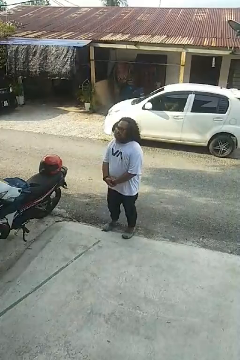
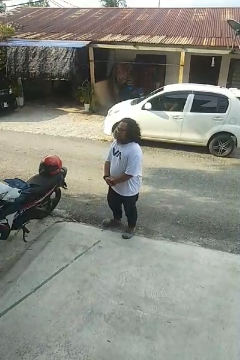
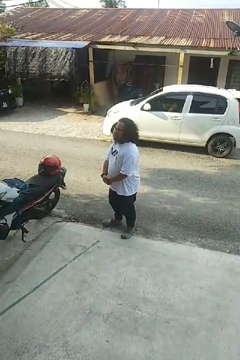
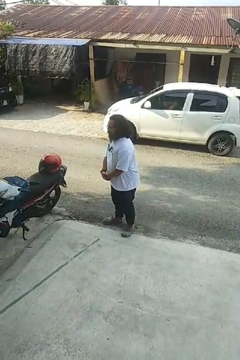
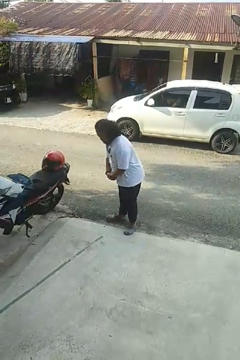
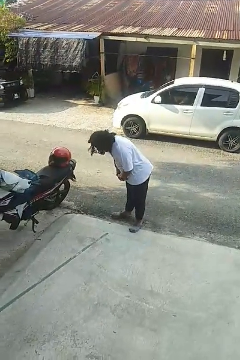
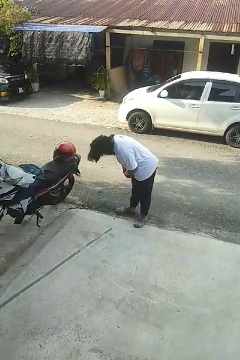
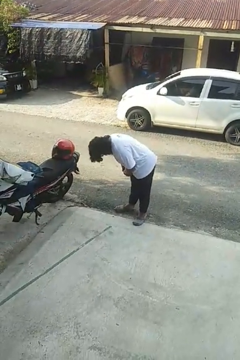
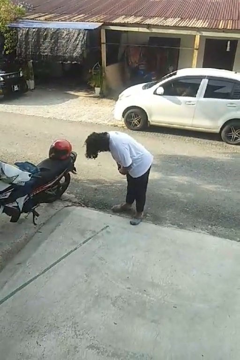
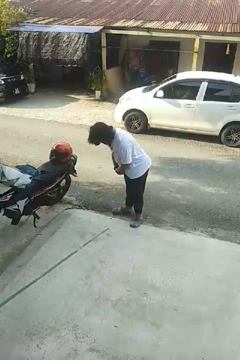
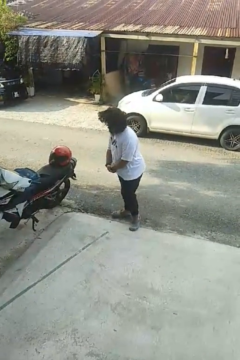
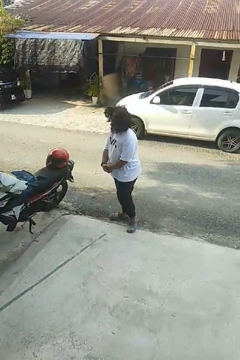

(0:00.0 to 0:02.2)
person bows

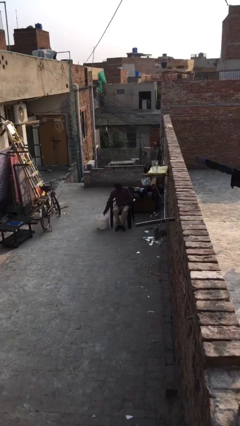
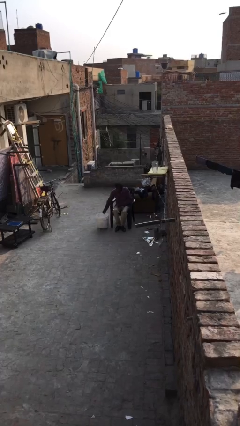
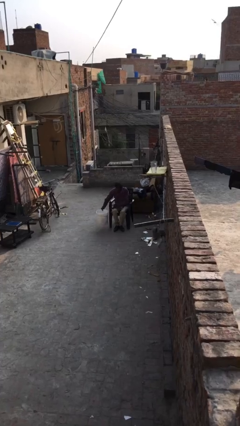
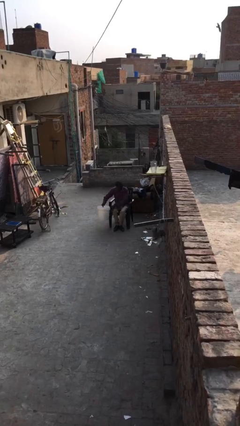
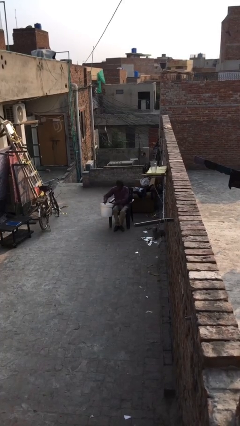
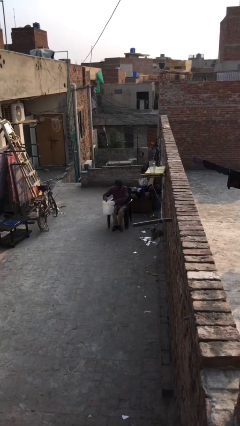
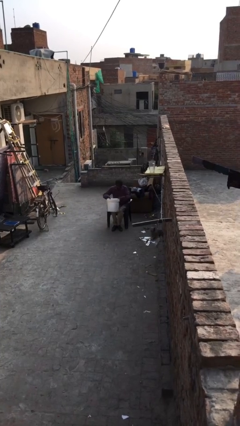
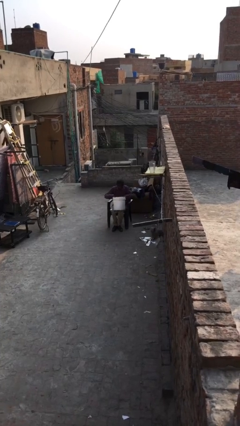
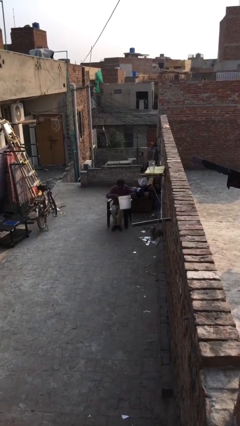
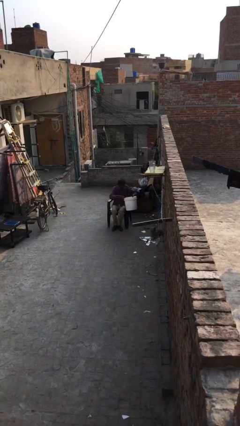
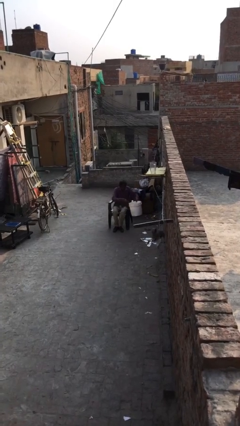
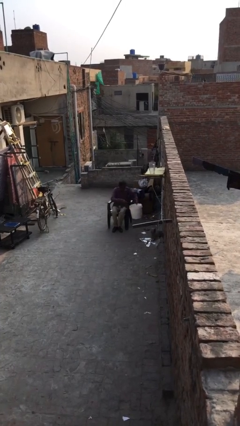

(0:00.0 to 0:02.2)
person picks up object from floor

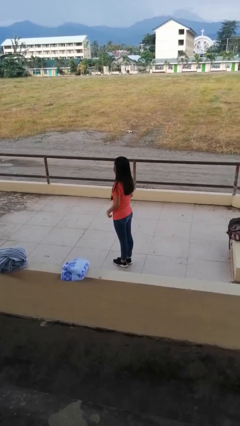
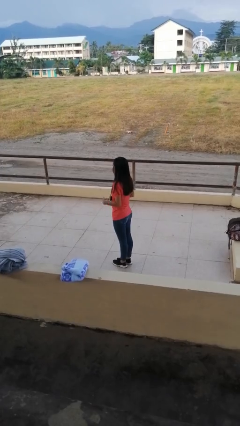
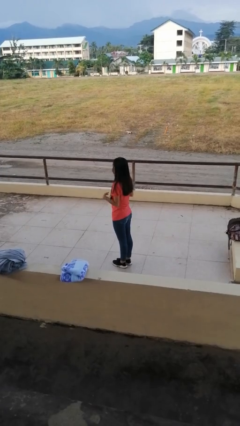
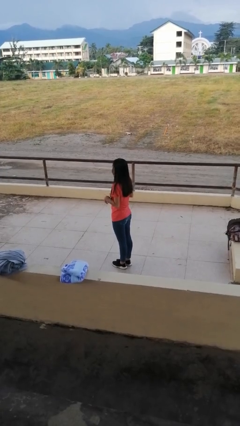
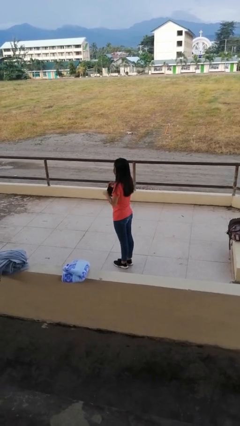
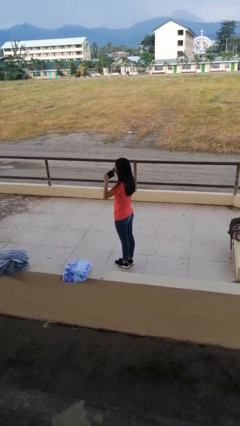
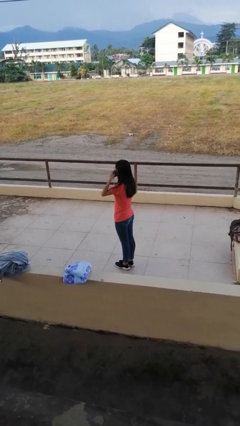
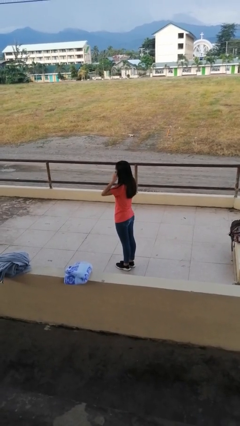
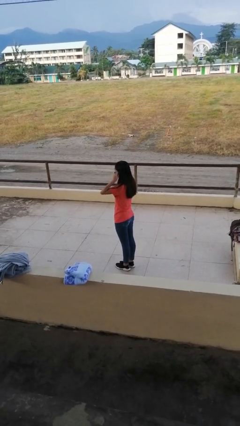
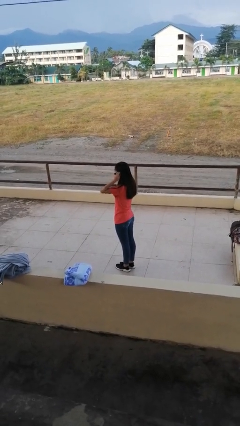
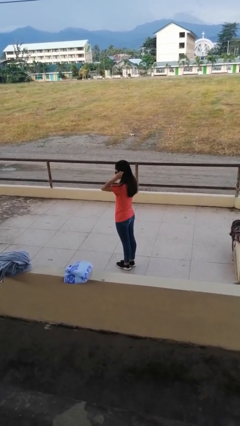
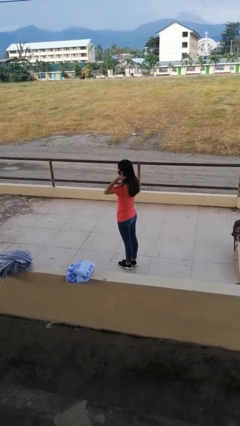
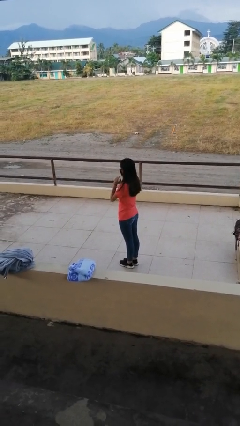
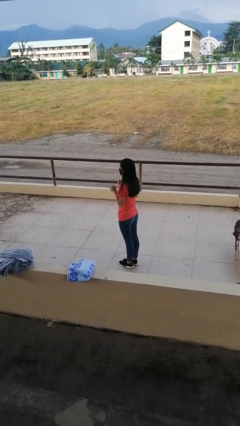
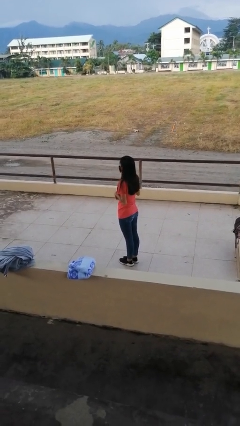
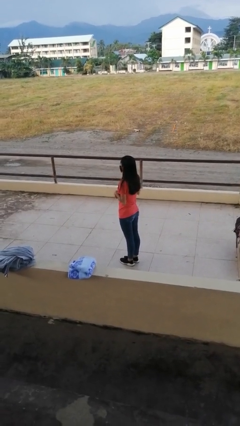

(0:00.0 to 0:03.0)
person puts on facemask

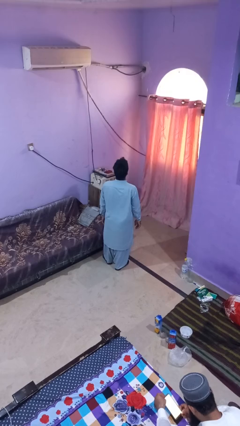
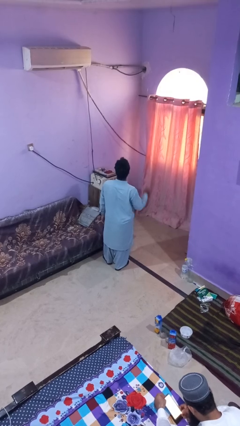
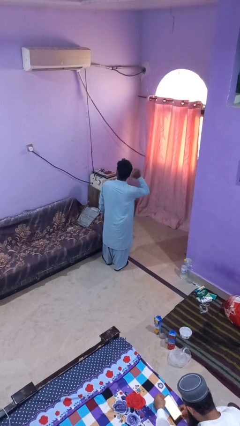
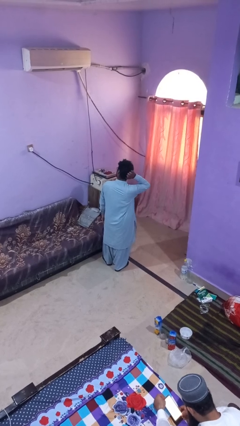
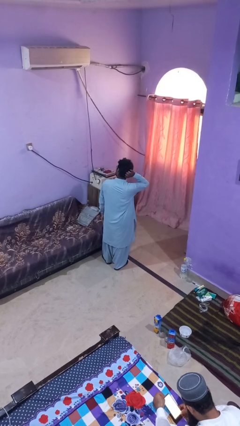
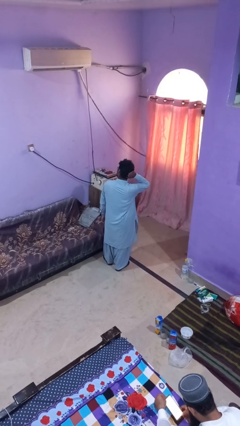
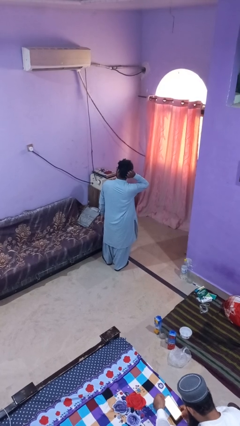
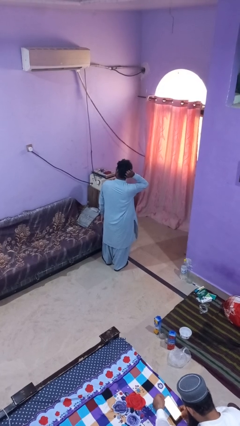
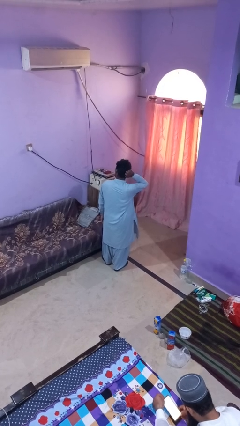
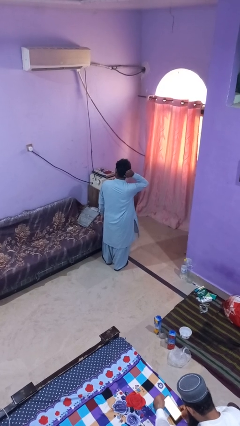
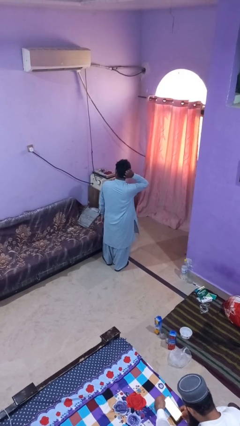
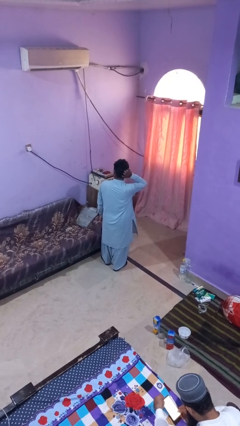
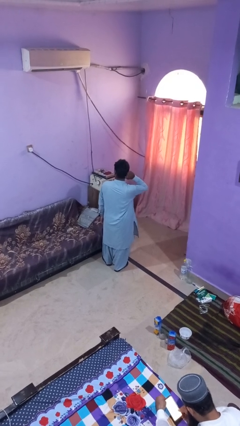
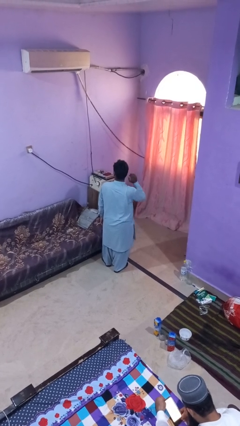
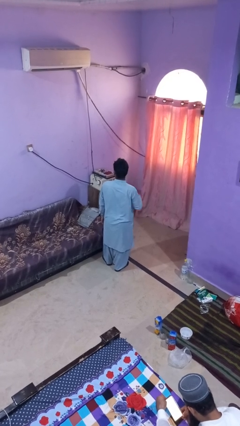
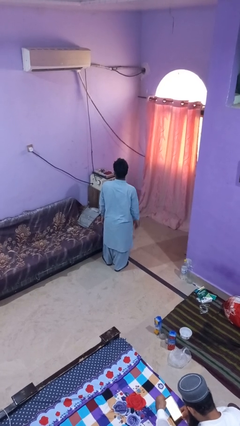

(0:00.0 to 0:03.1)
person scratches face

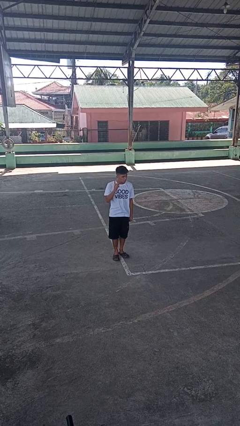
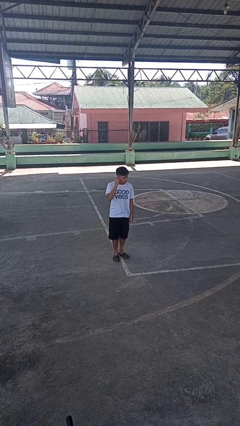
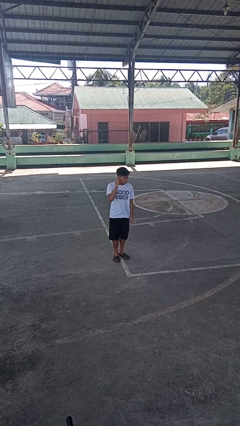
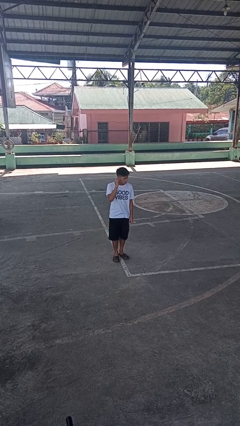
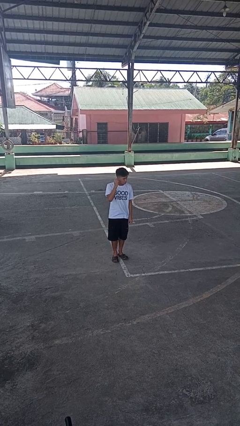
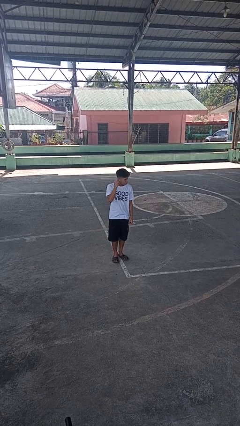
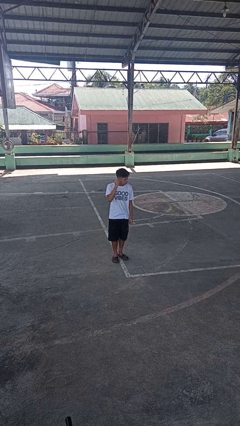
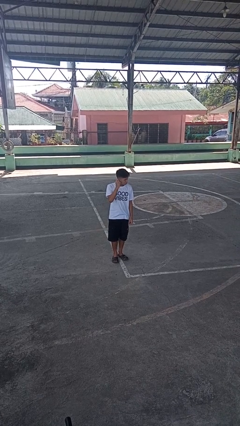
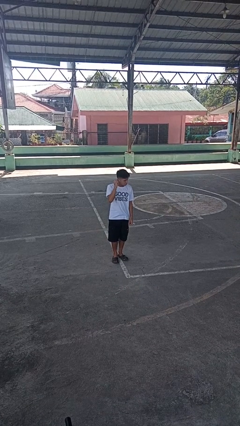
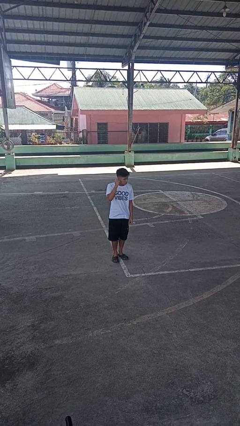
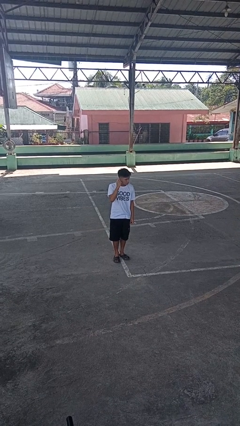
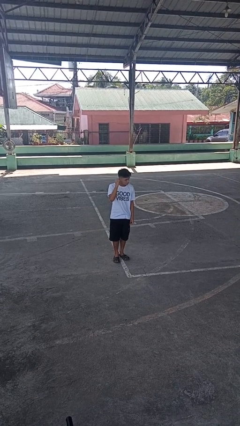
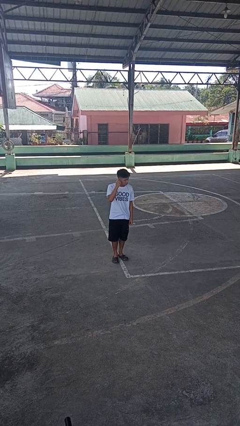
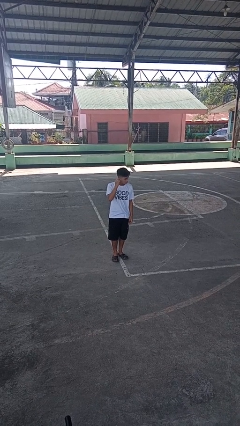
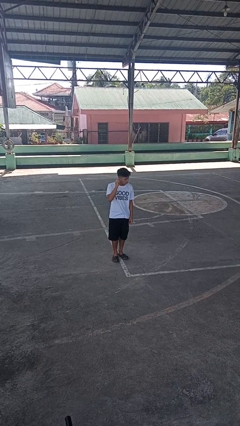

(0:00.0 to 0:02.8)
person touches earlobe

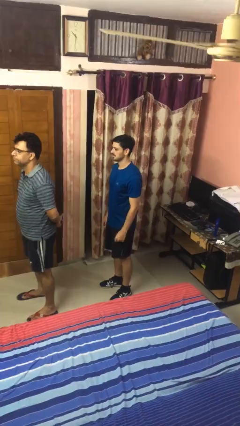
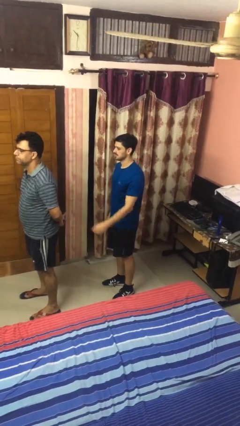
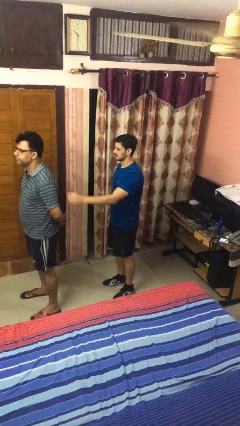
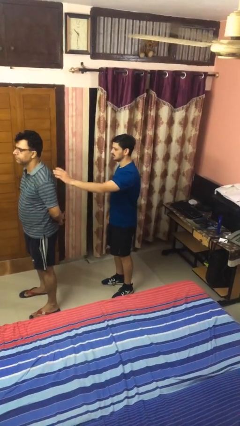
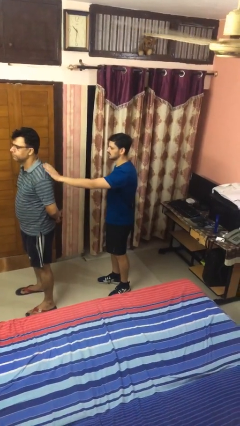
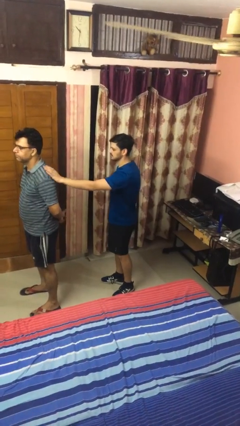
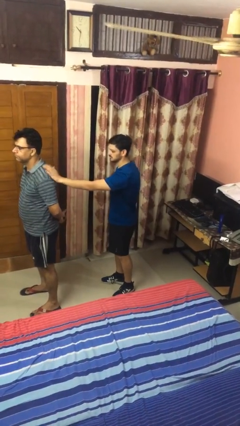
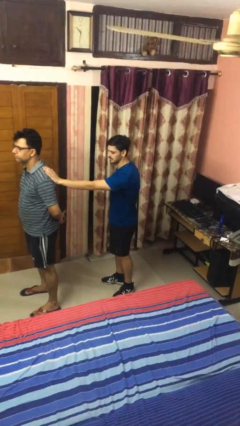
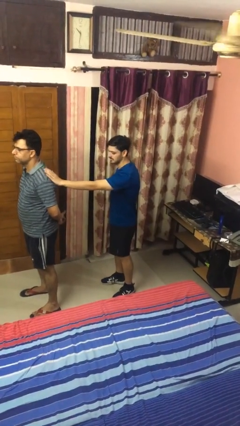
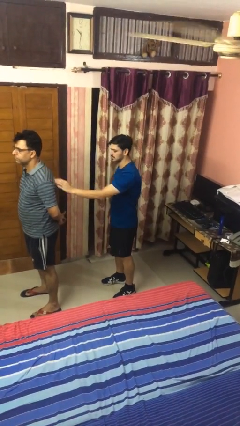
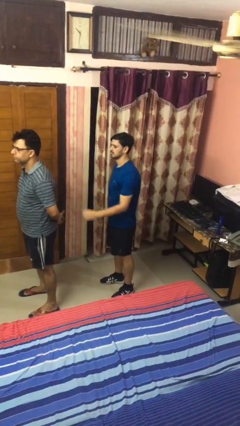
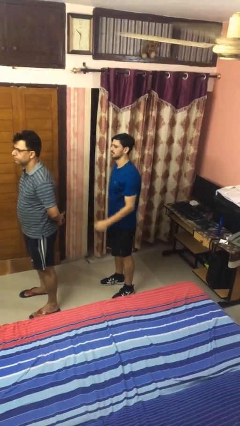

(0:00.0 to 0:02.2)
person touches back of person

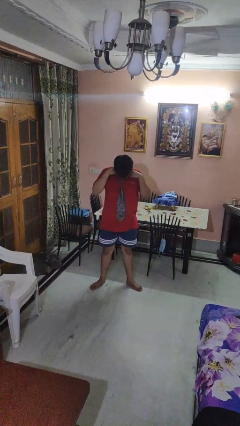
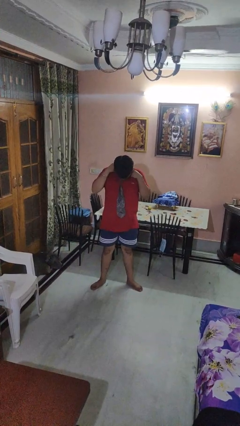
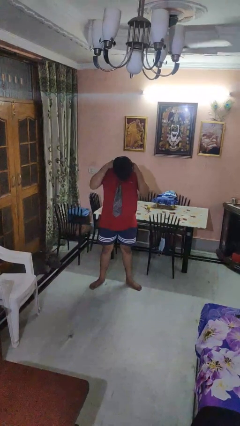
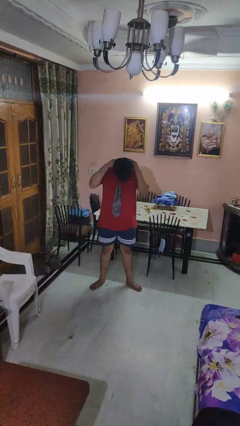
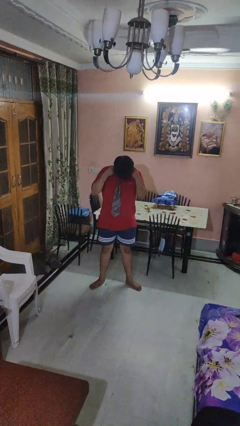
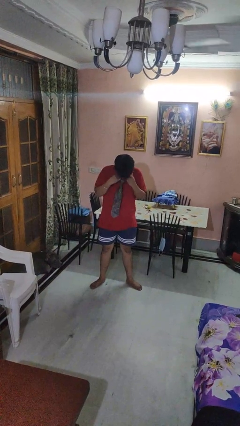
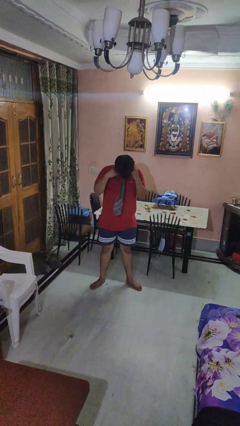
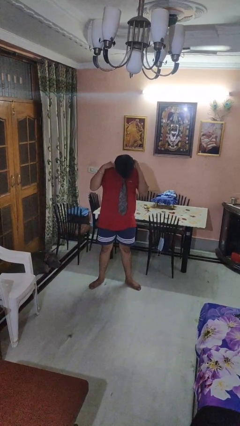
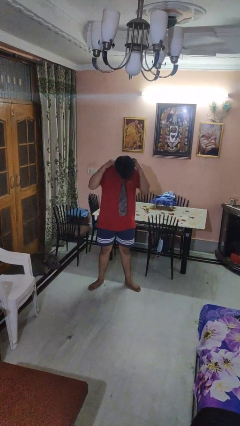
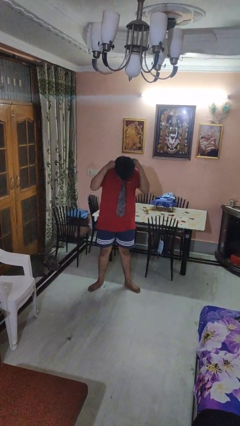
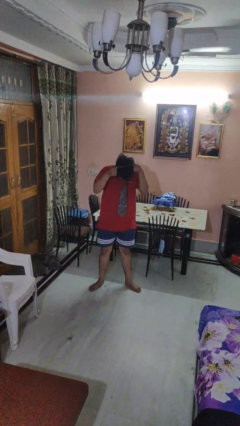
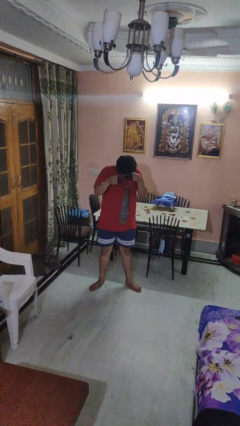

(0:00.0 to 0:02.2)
person takes off necktie

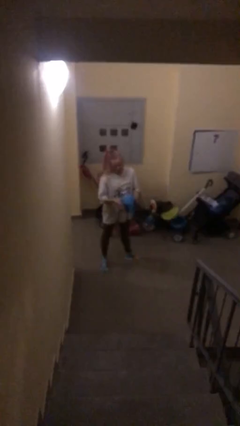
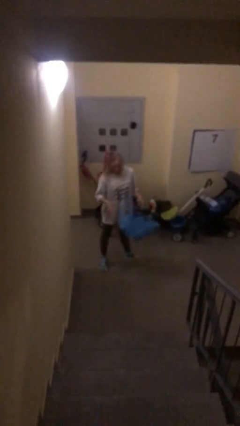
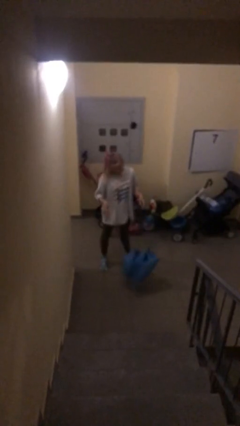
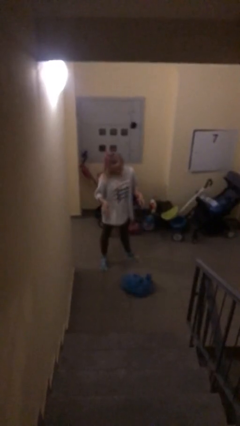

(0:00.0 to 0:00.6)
person drops object
